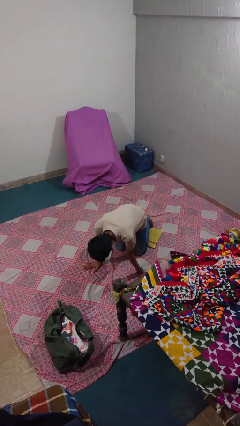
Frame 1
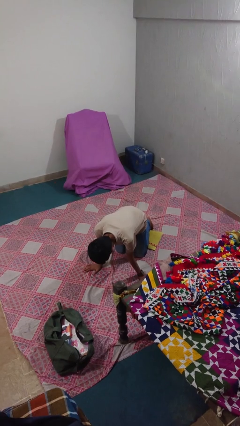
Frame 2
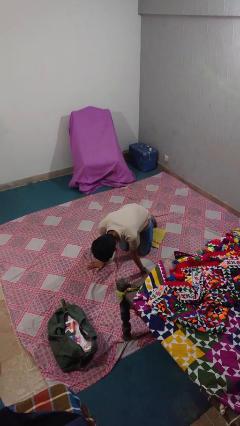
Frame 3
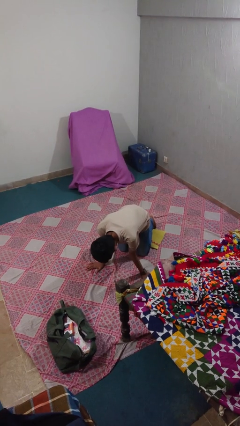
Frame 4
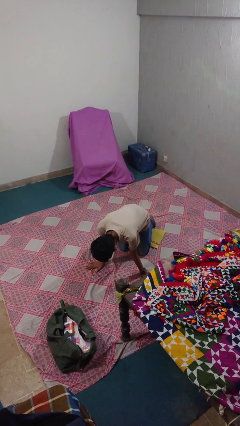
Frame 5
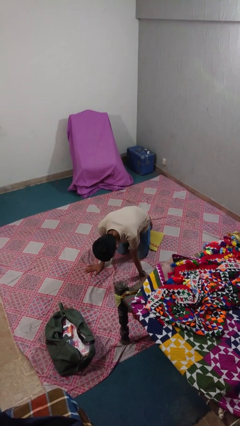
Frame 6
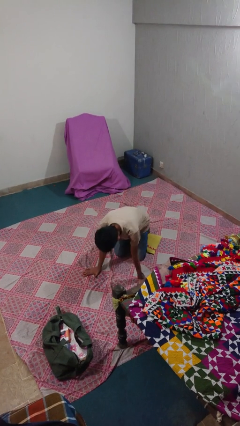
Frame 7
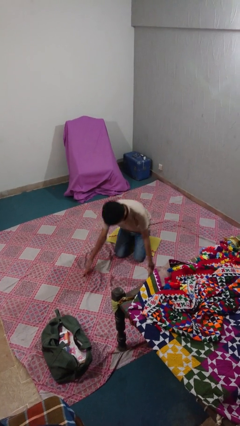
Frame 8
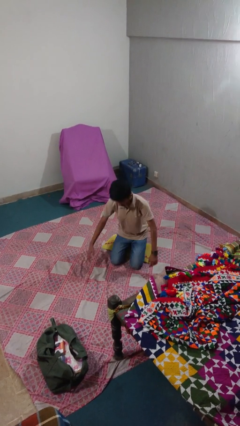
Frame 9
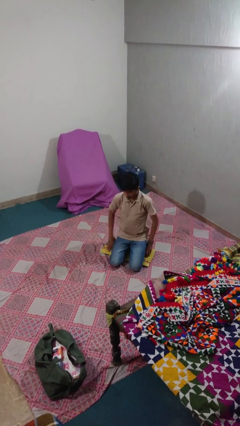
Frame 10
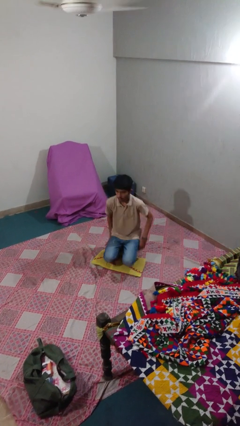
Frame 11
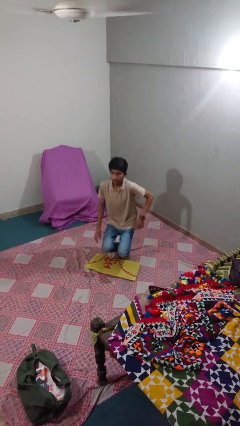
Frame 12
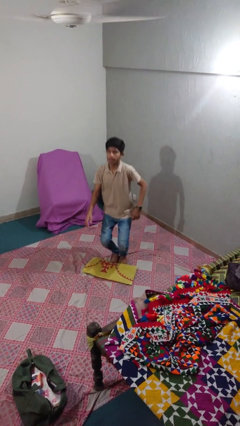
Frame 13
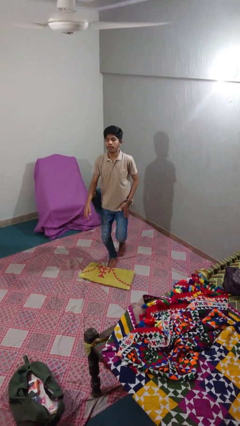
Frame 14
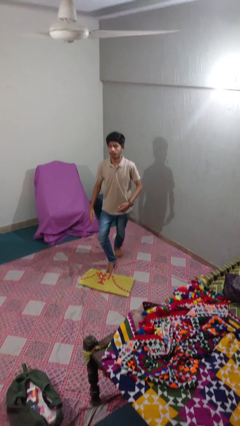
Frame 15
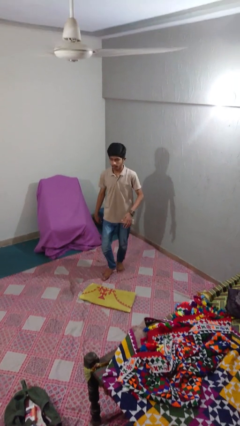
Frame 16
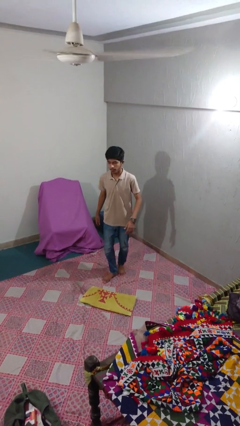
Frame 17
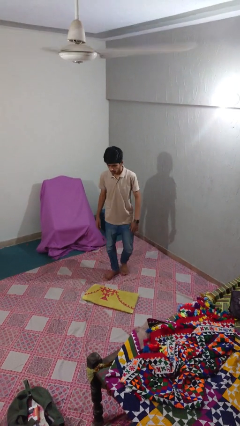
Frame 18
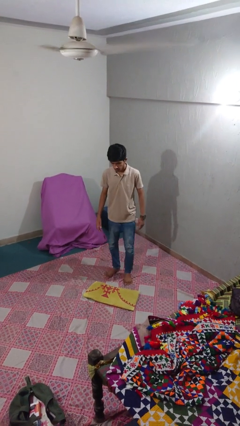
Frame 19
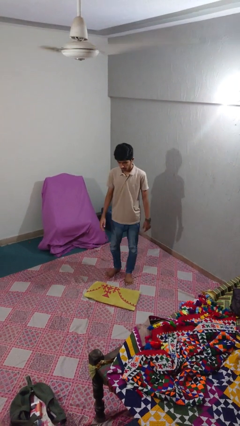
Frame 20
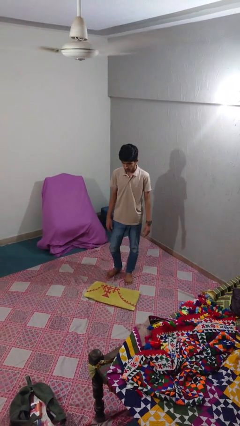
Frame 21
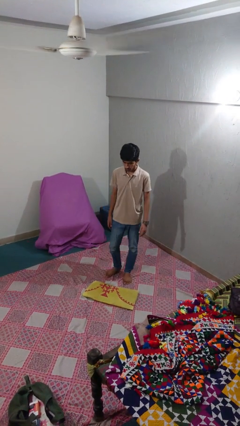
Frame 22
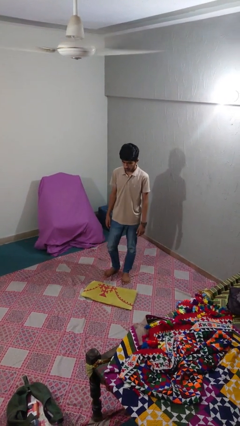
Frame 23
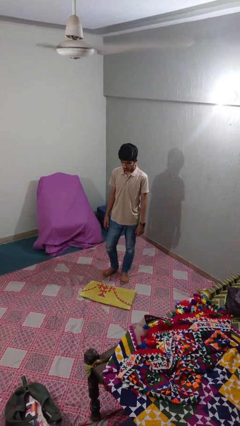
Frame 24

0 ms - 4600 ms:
person stands up from floor

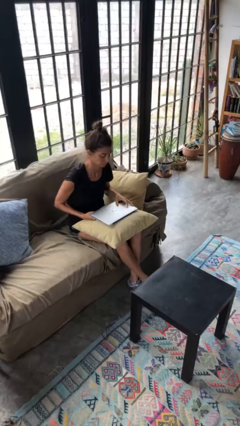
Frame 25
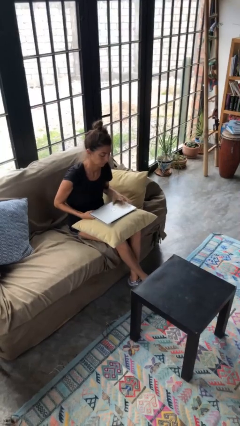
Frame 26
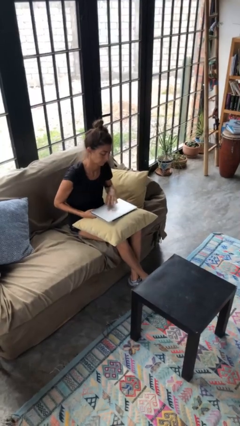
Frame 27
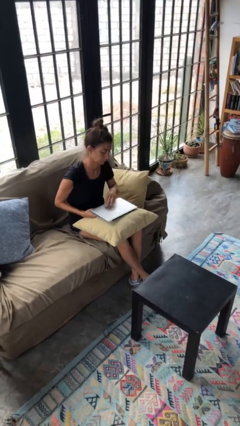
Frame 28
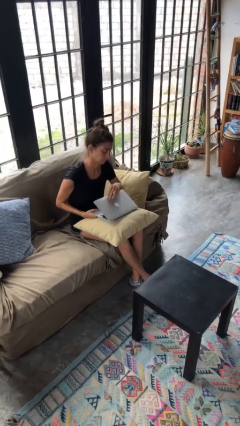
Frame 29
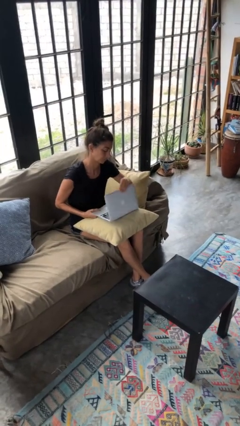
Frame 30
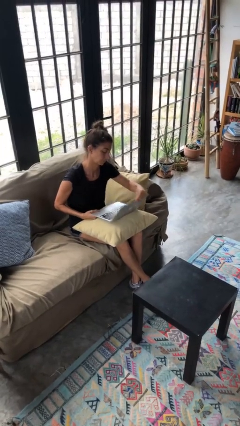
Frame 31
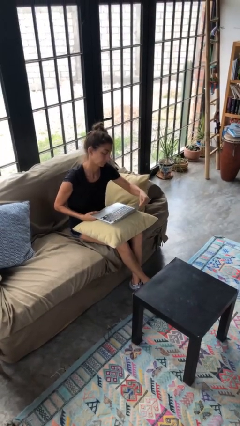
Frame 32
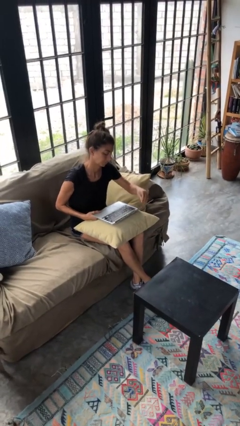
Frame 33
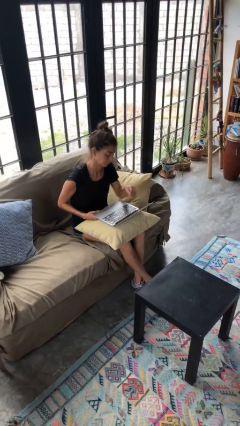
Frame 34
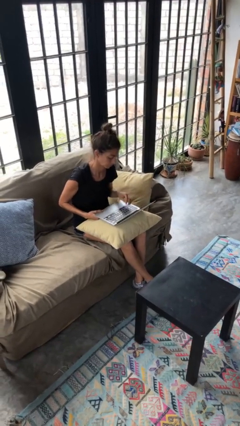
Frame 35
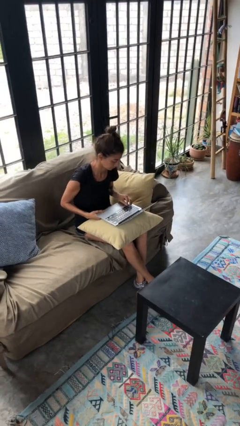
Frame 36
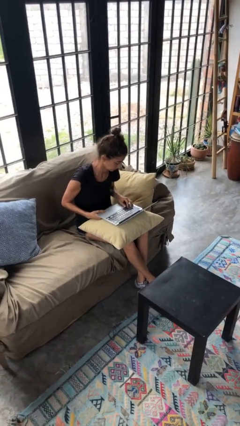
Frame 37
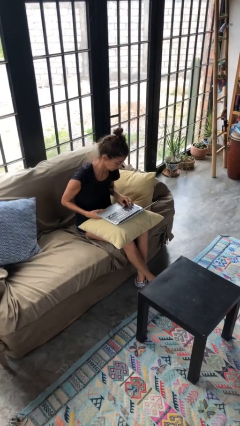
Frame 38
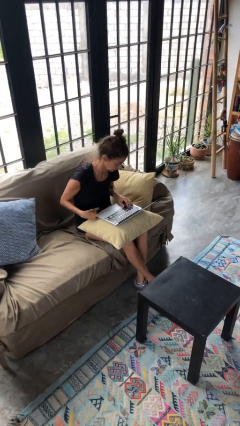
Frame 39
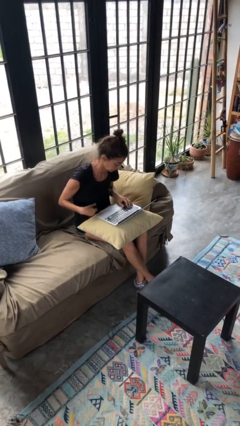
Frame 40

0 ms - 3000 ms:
person opens laptop

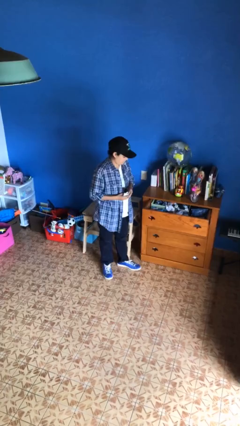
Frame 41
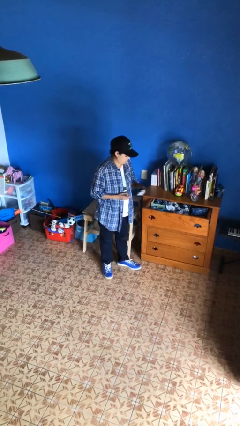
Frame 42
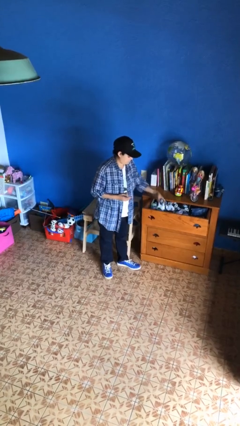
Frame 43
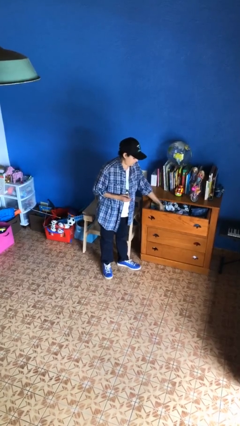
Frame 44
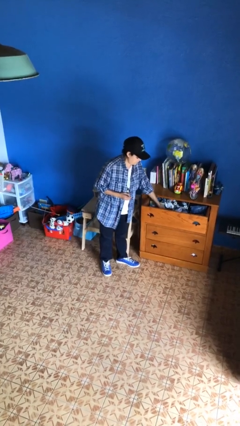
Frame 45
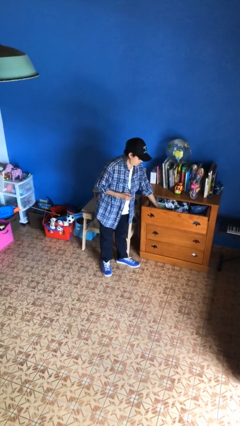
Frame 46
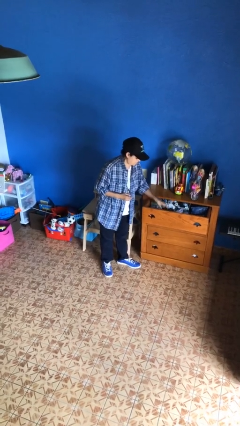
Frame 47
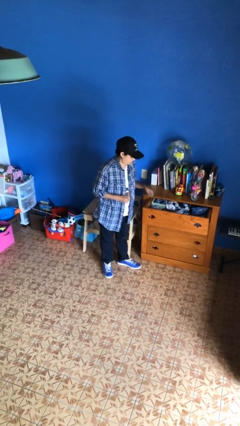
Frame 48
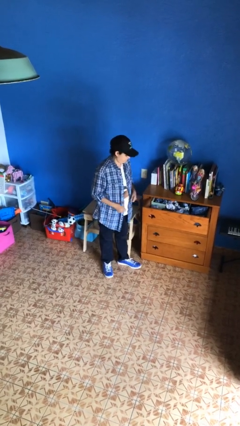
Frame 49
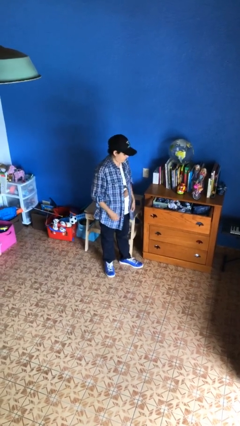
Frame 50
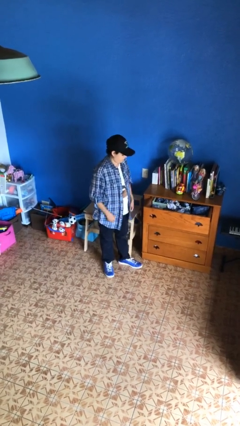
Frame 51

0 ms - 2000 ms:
person puts clothes into dresser

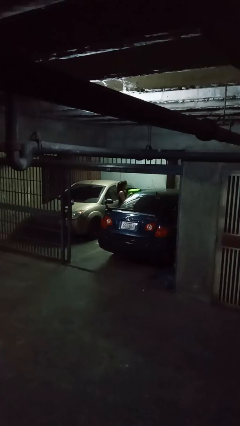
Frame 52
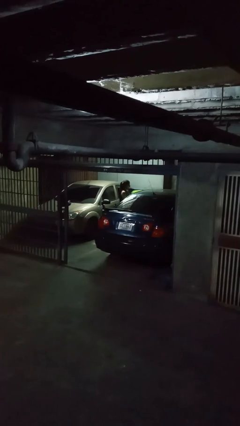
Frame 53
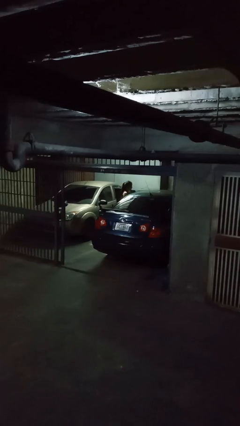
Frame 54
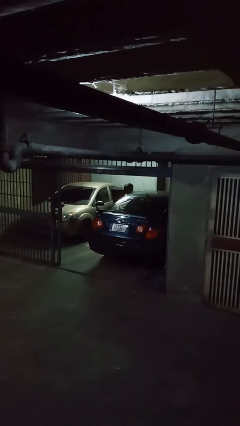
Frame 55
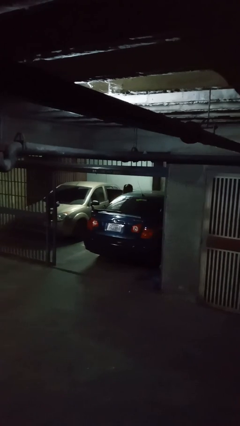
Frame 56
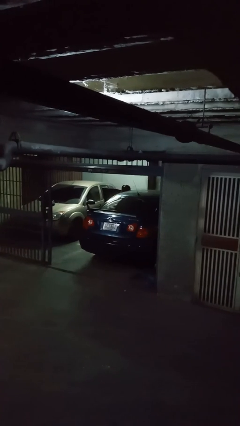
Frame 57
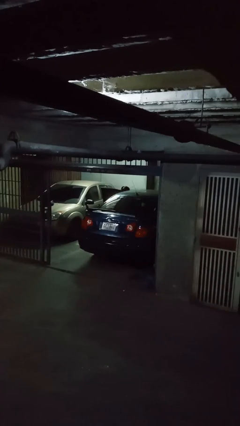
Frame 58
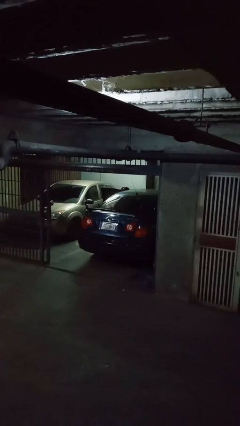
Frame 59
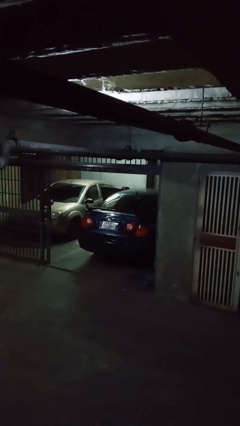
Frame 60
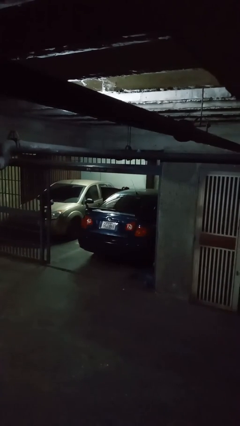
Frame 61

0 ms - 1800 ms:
person loads car

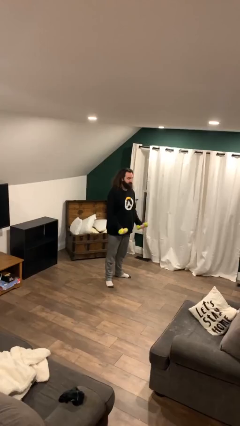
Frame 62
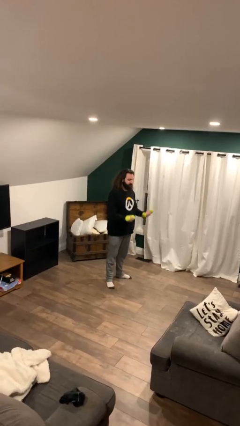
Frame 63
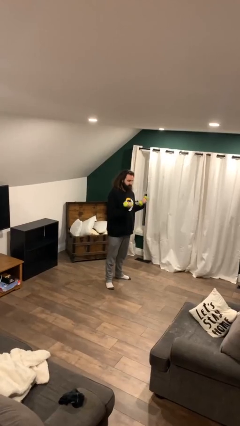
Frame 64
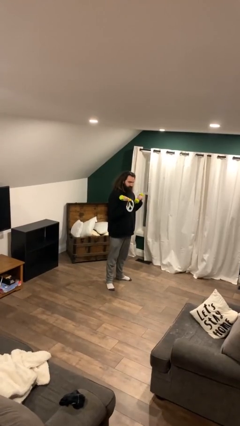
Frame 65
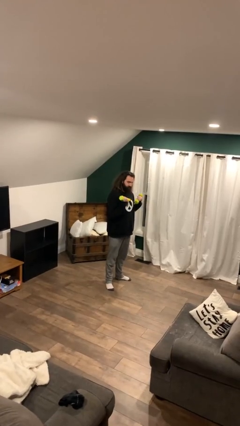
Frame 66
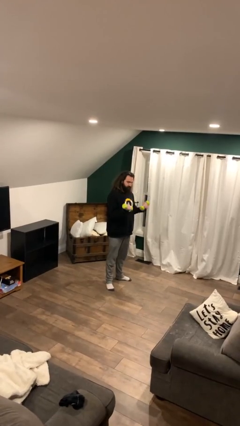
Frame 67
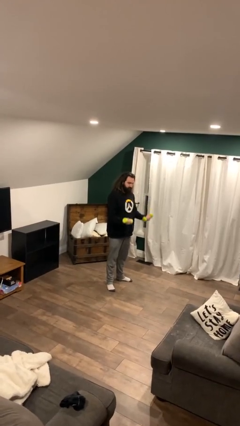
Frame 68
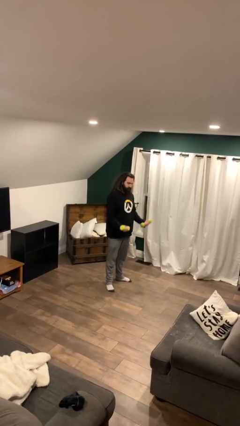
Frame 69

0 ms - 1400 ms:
person lifts dumbbells

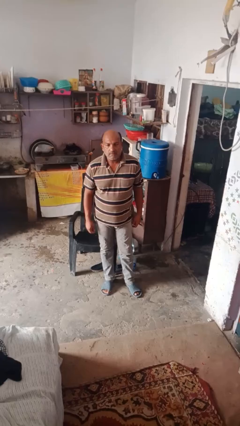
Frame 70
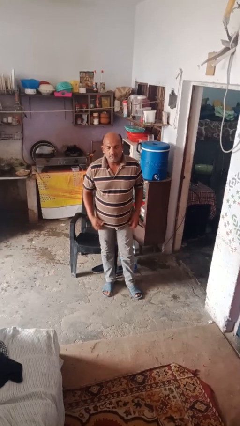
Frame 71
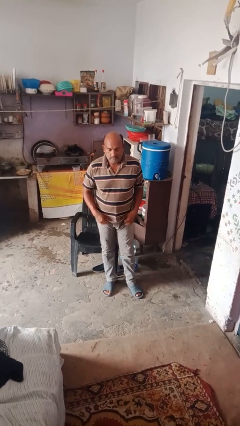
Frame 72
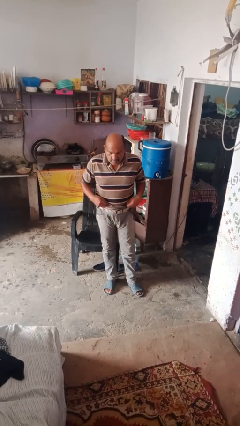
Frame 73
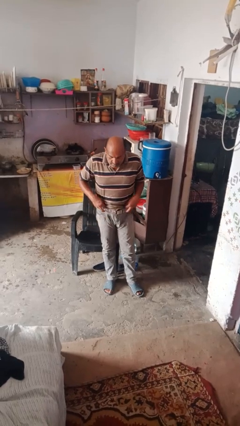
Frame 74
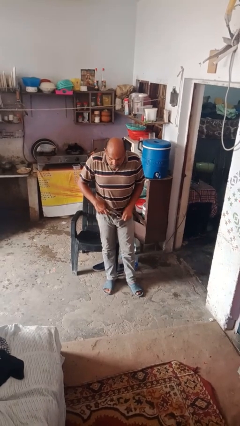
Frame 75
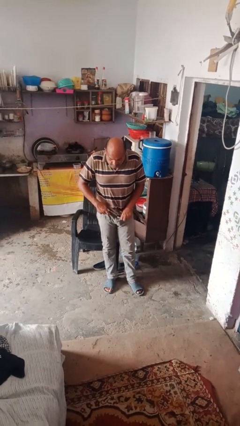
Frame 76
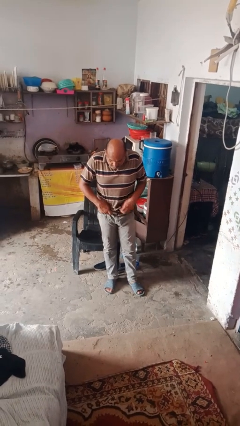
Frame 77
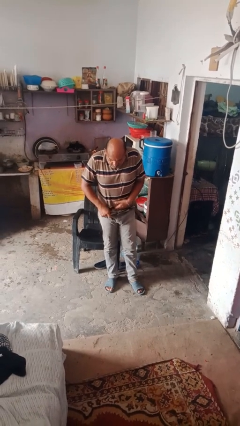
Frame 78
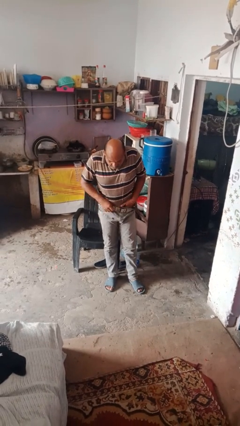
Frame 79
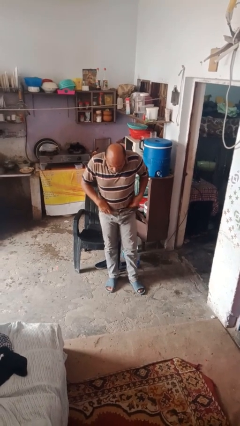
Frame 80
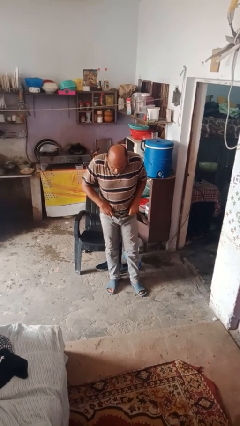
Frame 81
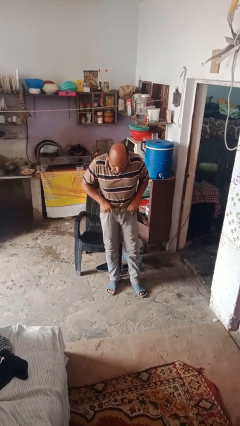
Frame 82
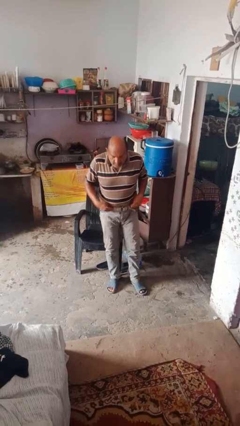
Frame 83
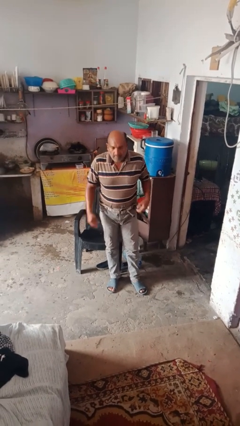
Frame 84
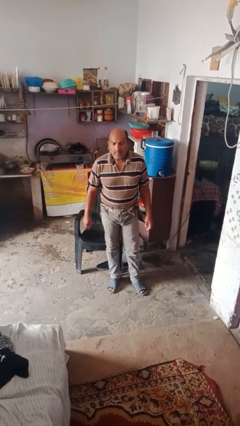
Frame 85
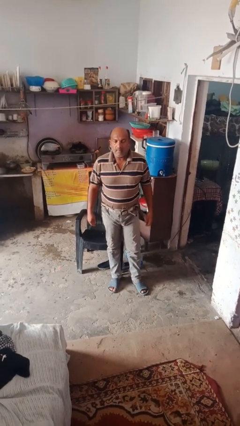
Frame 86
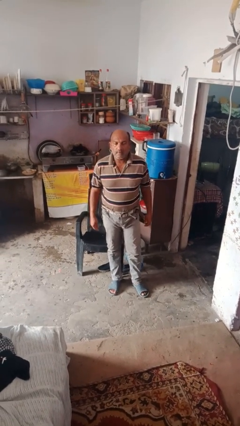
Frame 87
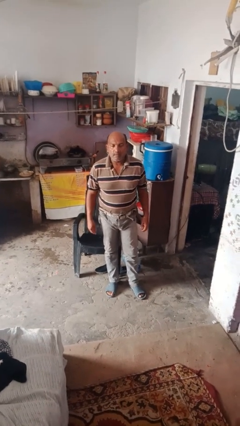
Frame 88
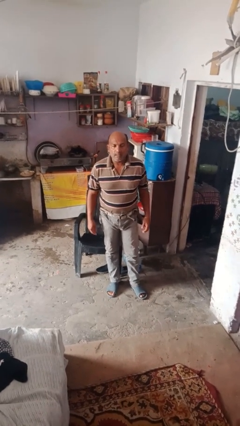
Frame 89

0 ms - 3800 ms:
person tucks in shirt

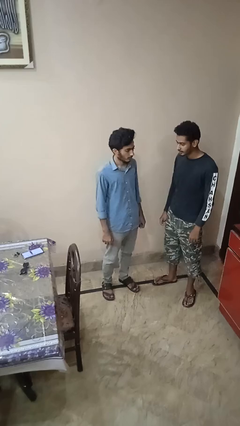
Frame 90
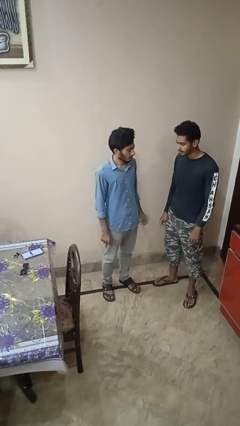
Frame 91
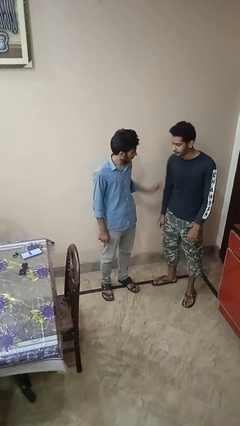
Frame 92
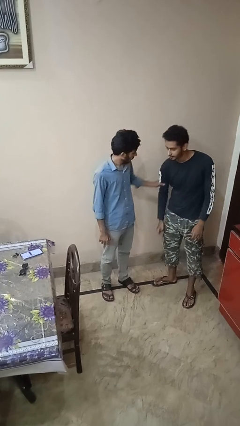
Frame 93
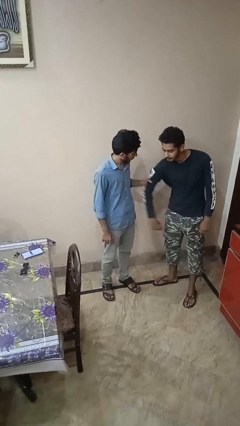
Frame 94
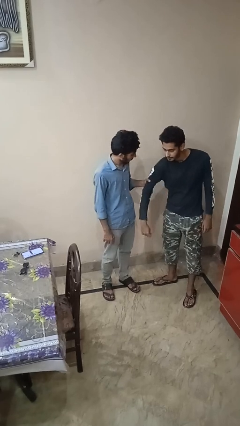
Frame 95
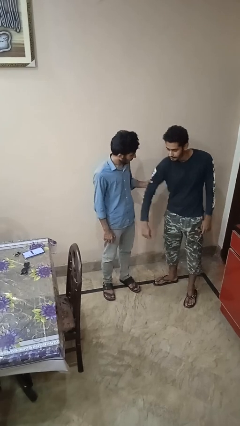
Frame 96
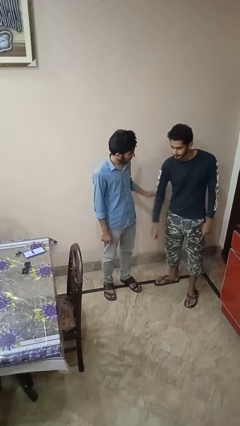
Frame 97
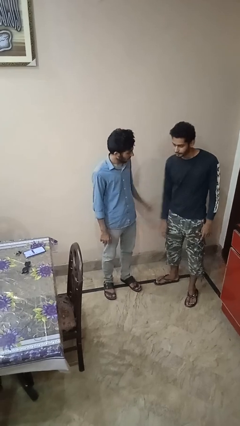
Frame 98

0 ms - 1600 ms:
person grabs person by bicep
